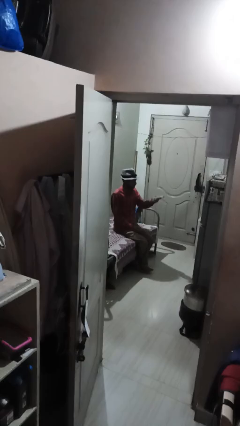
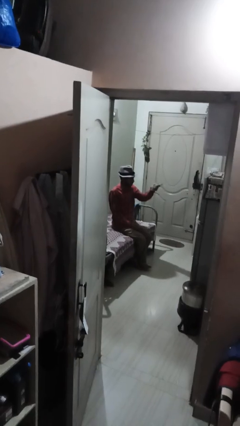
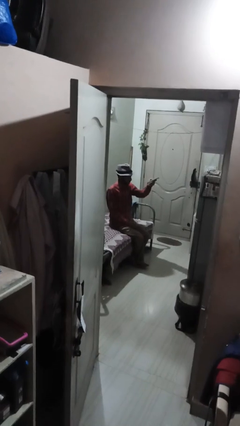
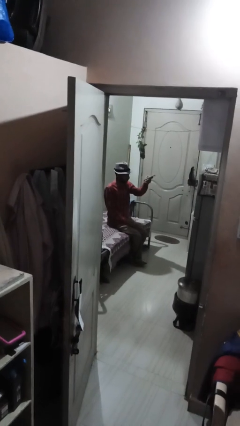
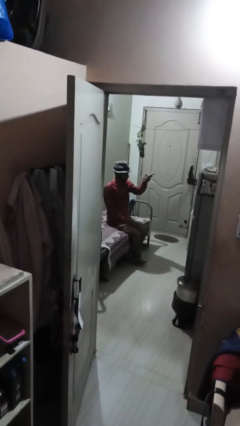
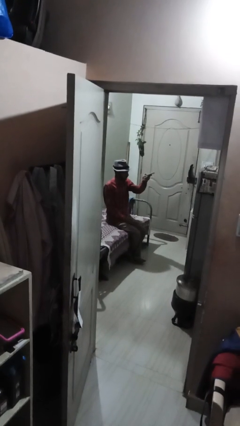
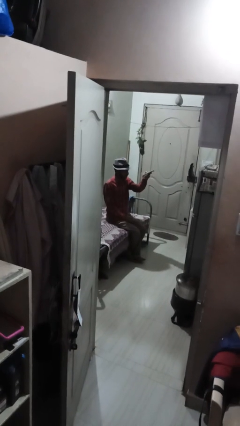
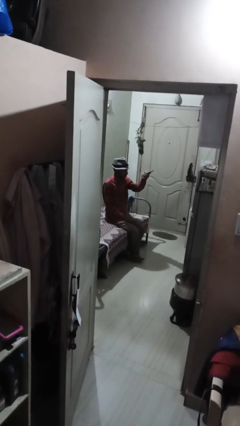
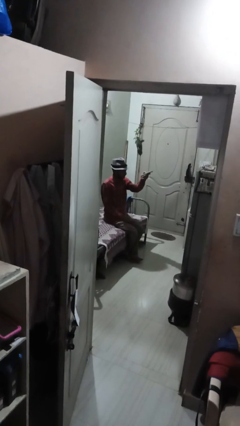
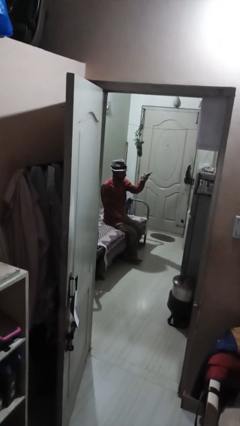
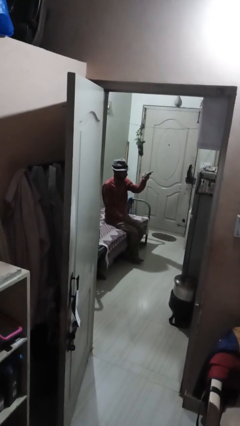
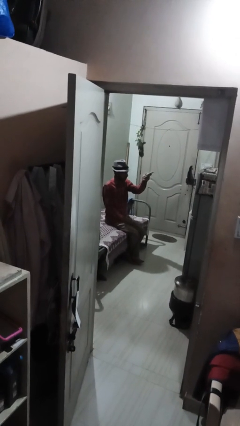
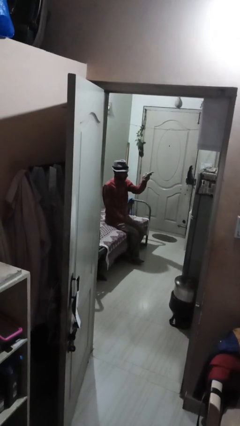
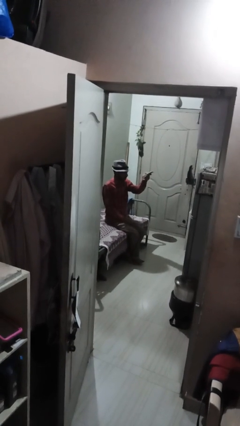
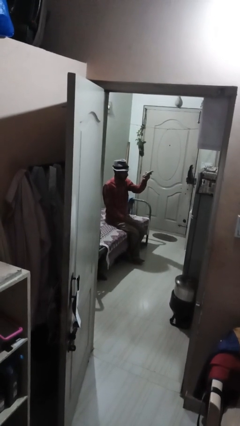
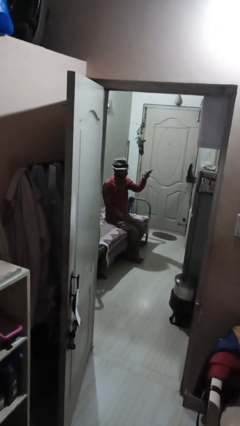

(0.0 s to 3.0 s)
person uses television remote

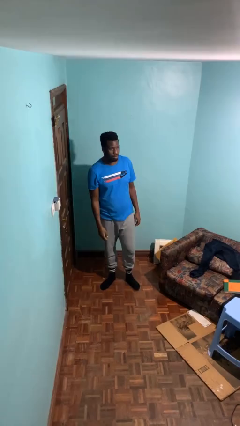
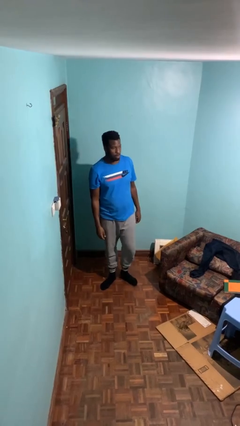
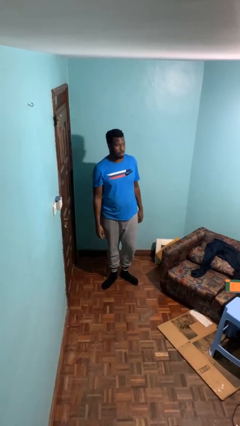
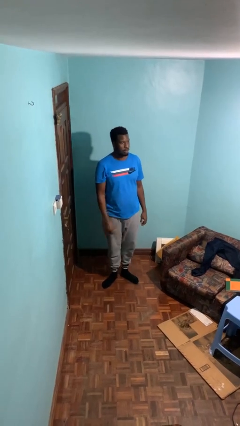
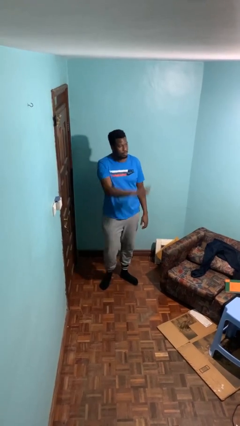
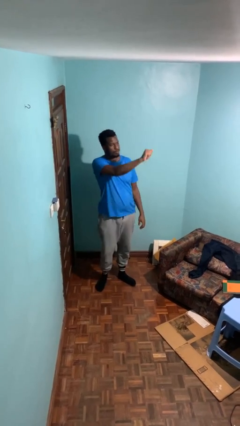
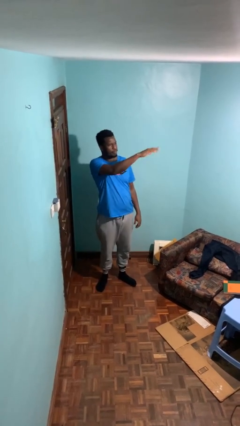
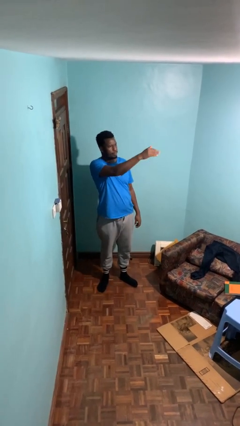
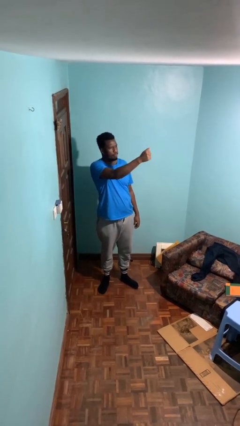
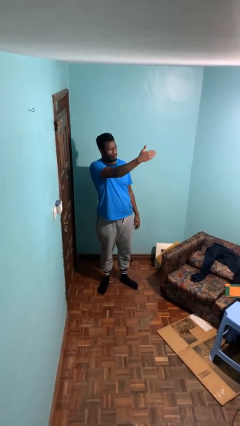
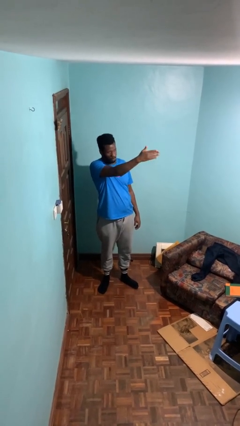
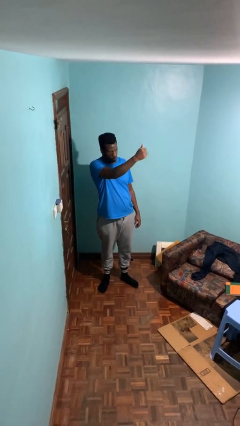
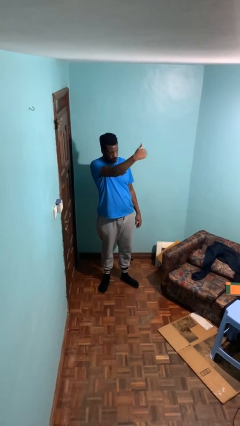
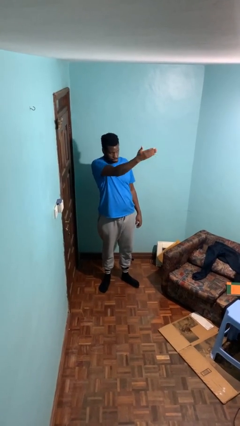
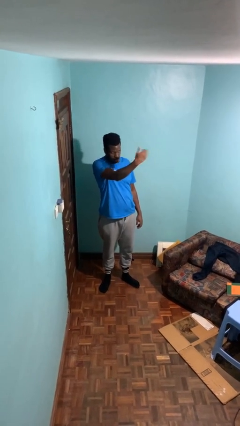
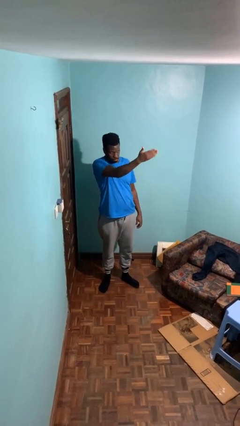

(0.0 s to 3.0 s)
person gestures come here

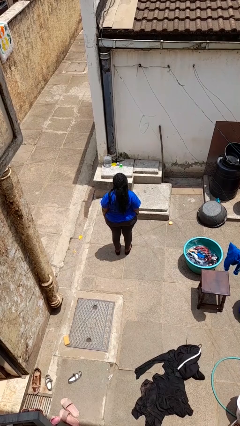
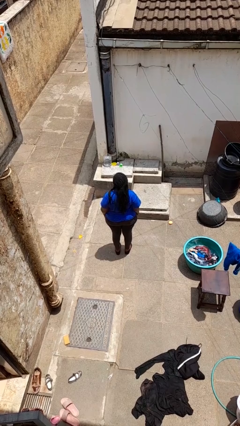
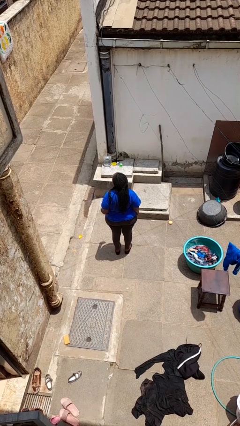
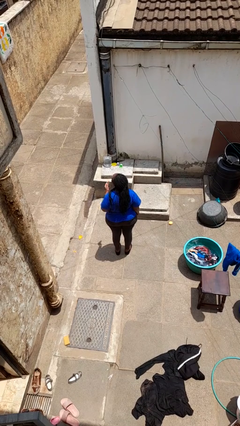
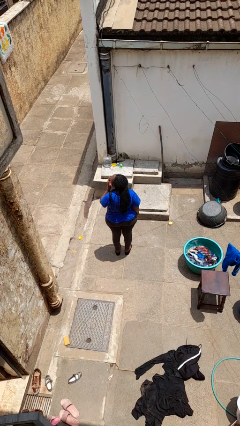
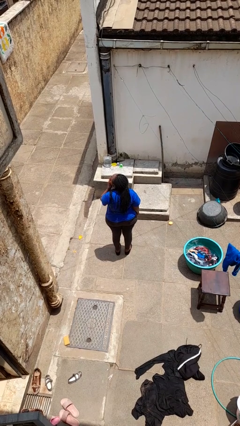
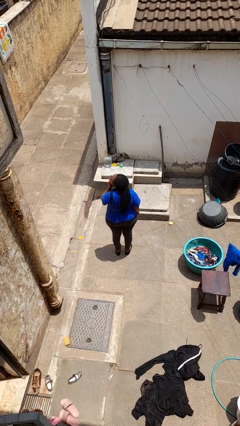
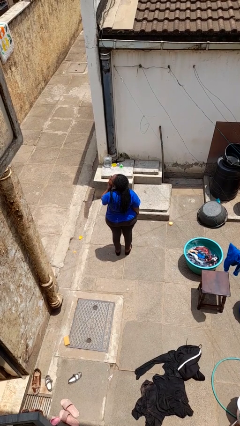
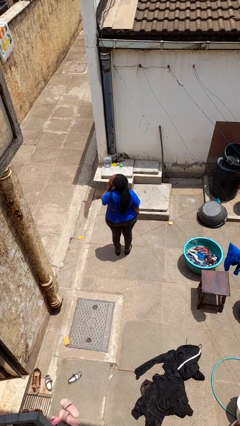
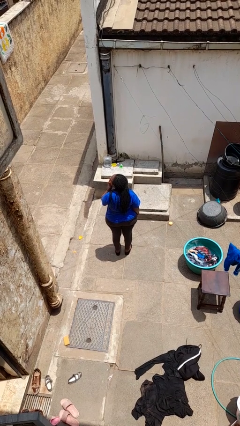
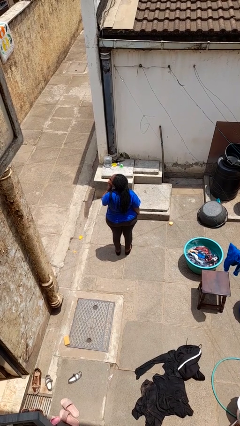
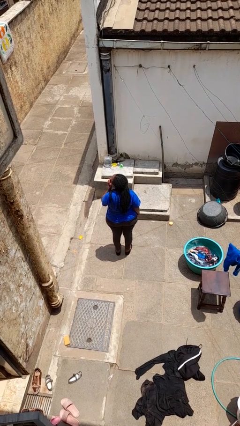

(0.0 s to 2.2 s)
person yawns

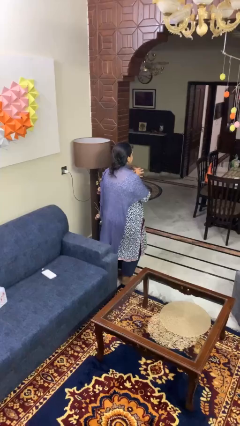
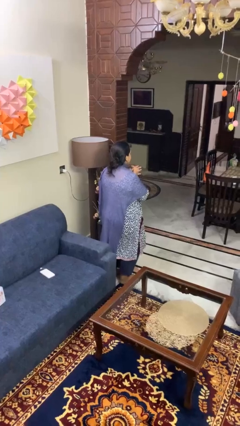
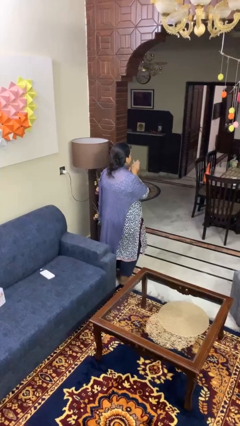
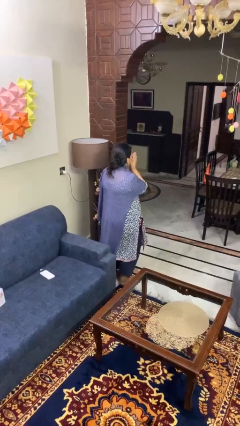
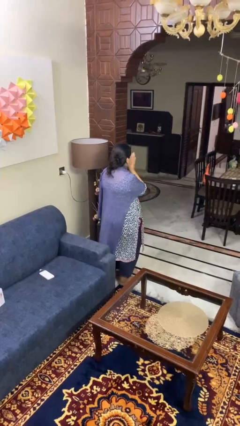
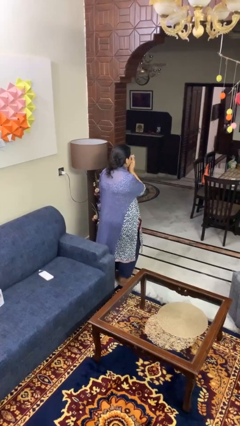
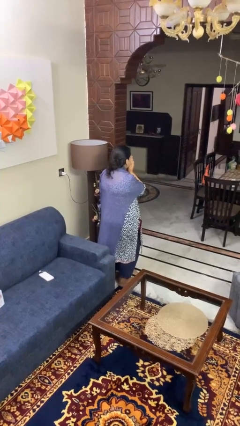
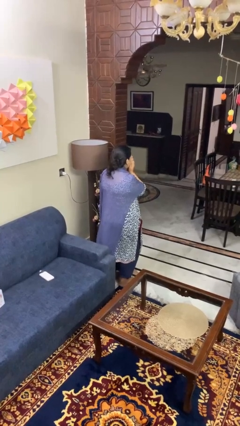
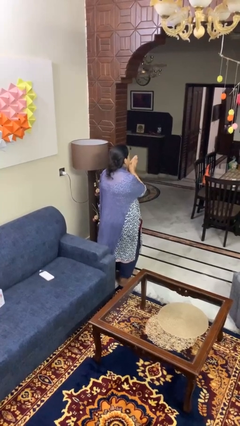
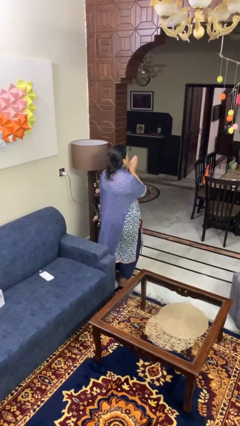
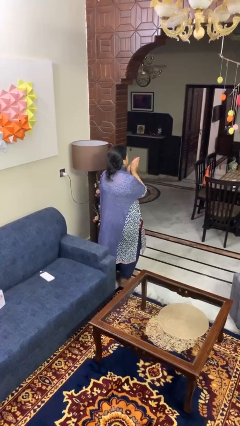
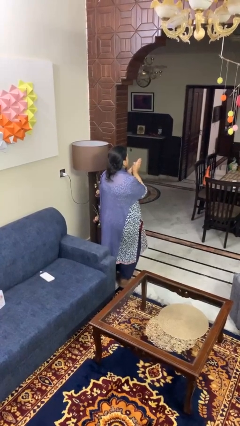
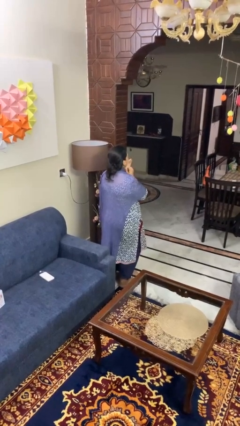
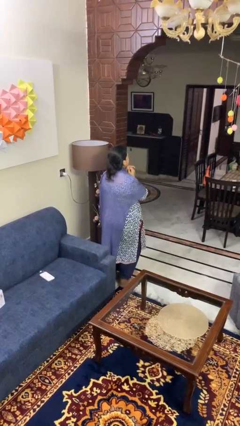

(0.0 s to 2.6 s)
person blows into hands

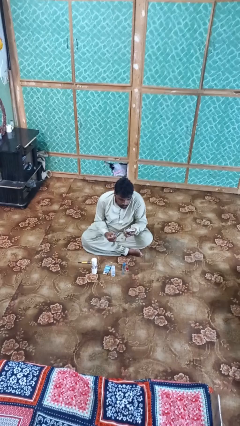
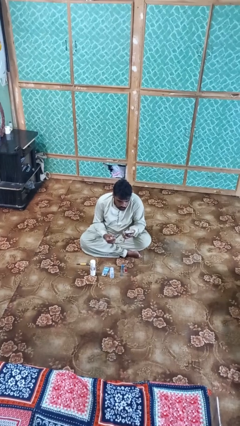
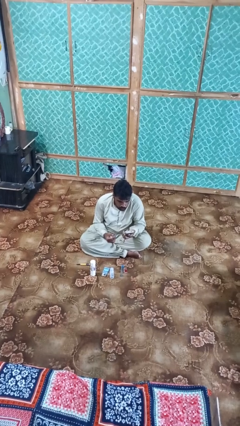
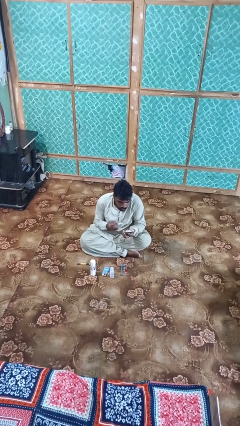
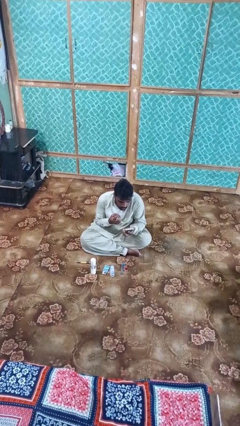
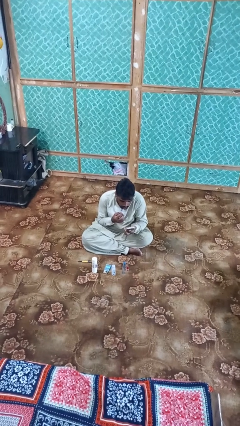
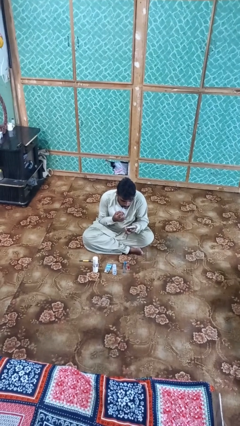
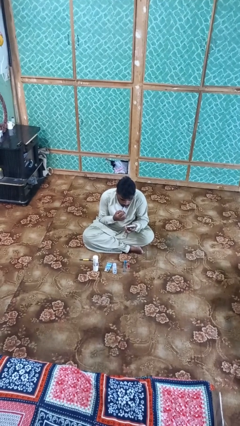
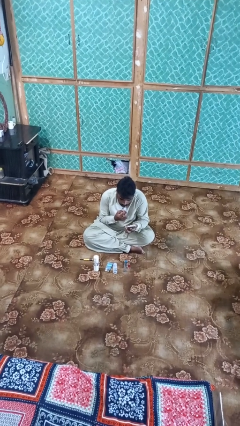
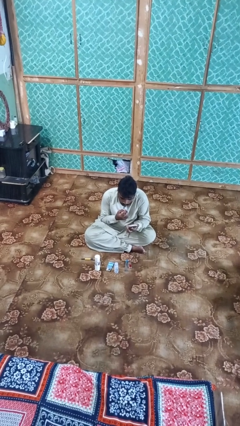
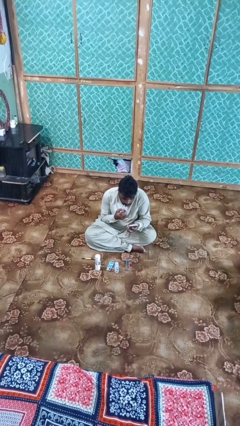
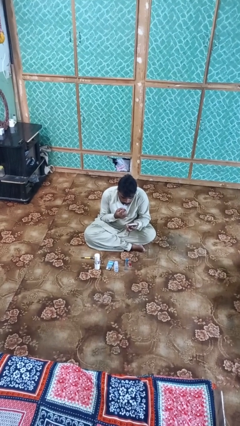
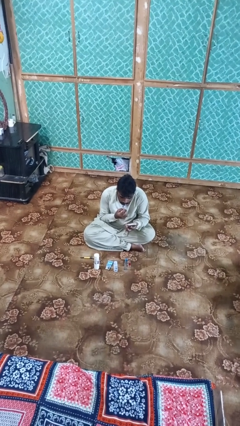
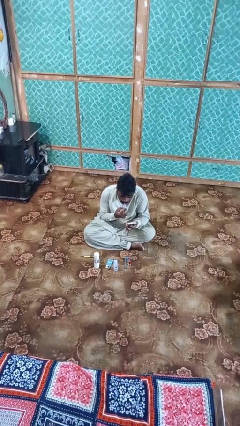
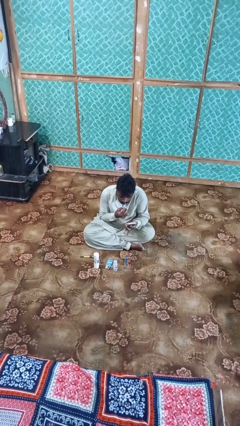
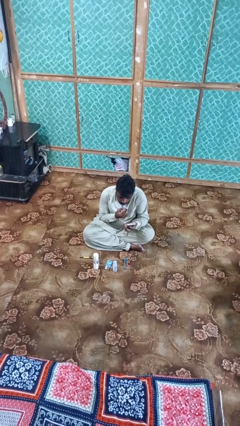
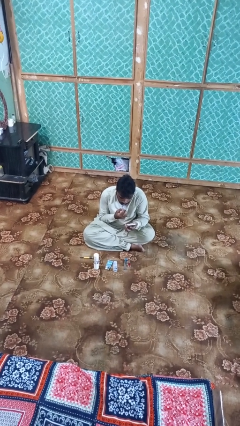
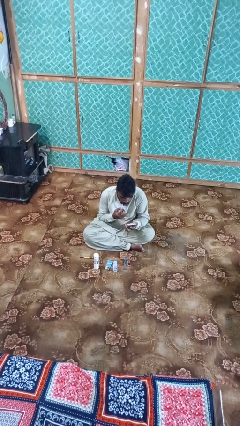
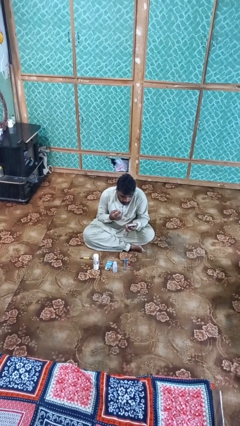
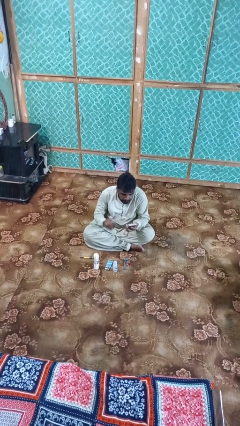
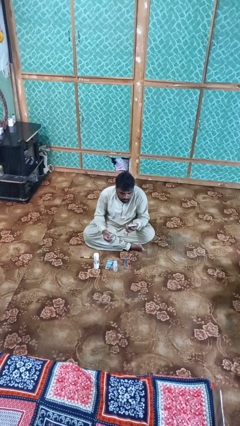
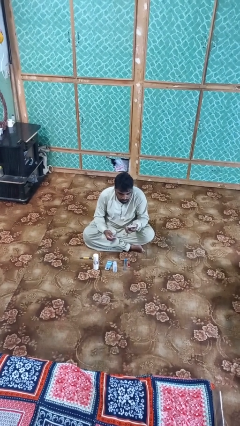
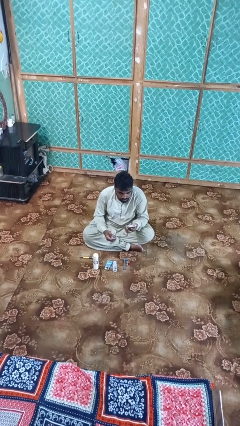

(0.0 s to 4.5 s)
person applies lip makeup

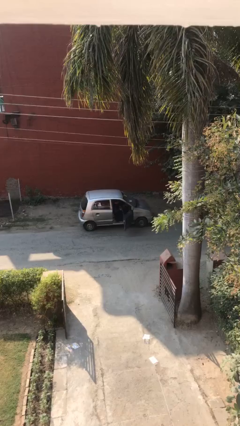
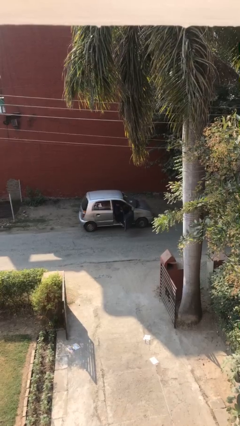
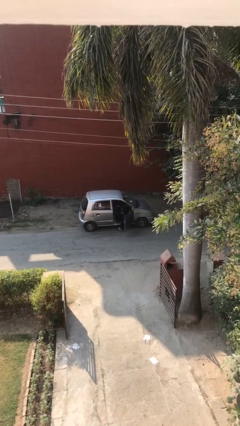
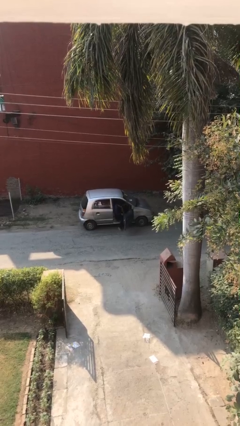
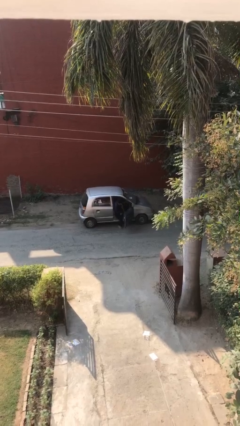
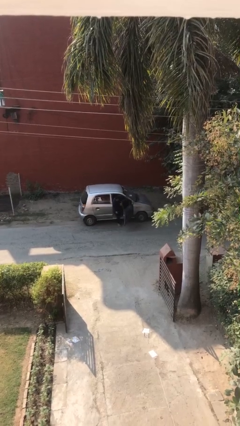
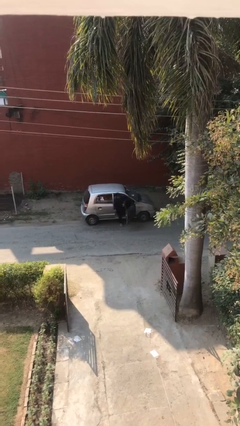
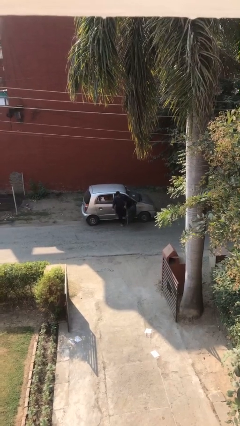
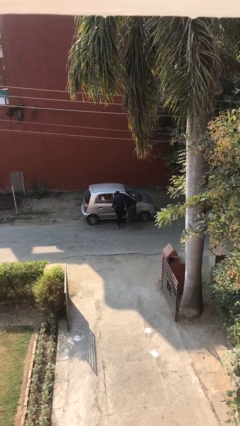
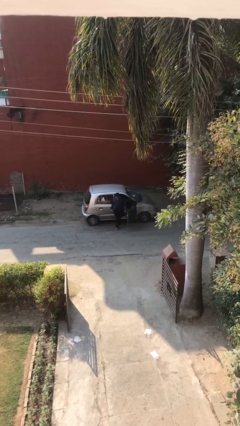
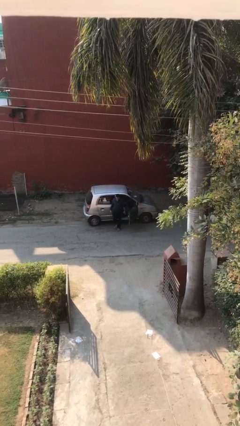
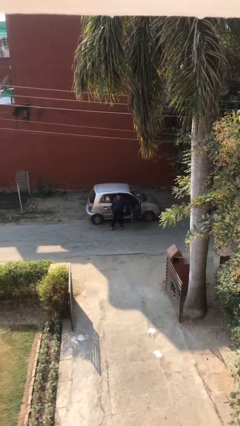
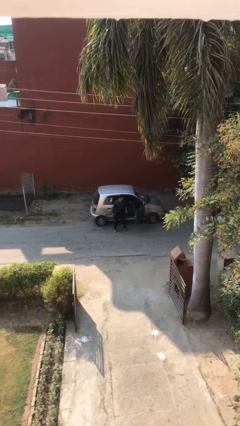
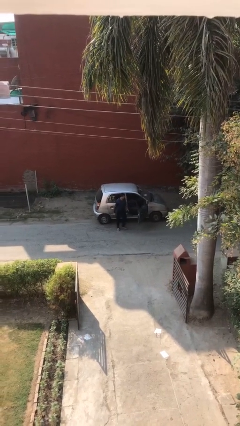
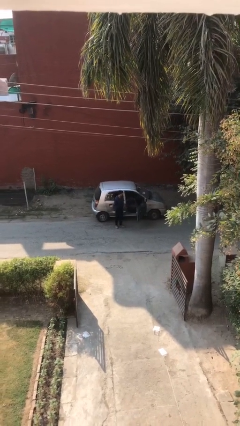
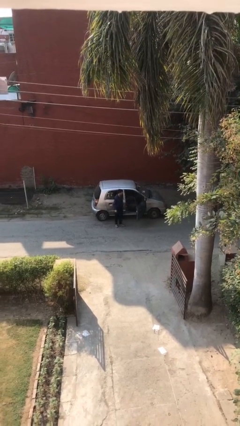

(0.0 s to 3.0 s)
person exits car
